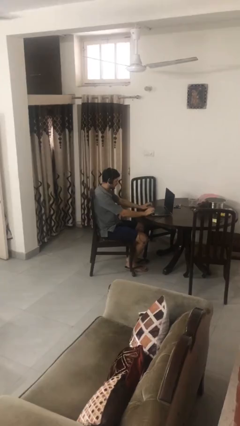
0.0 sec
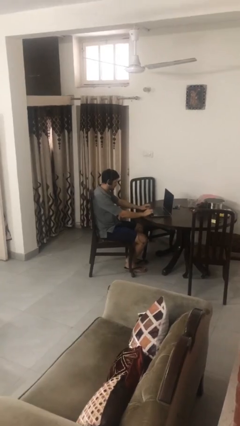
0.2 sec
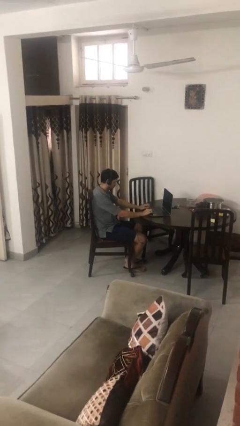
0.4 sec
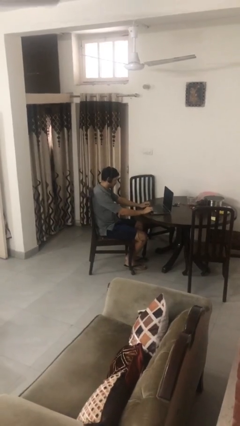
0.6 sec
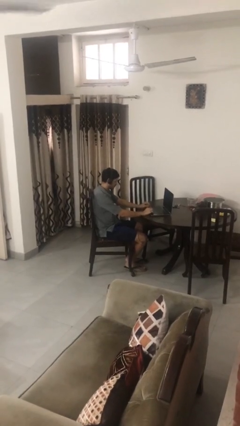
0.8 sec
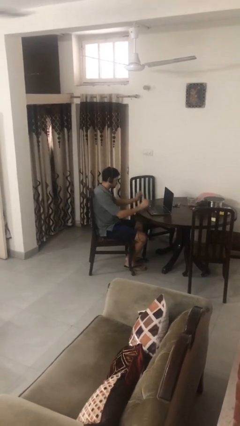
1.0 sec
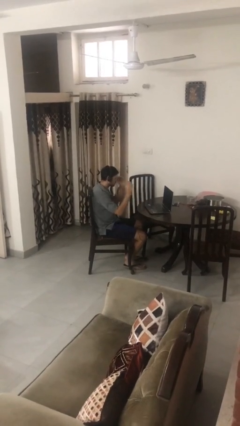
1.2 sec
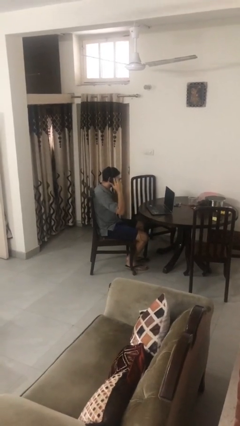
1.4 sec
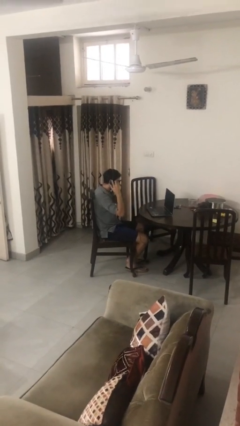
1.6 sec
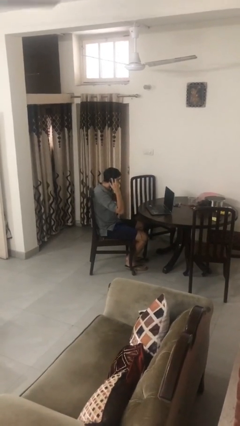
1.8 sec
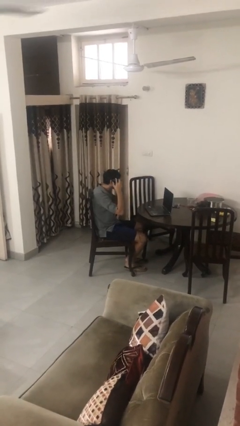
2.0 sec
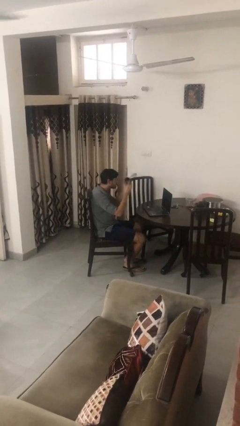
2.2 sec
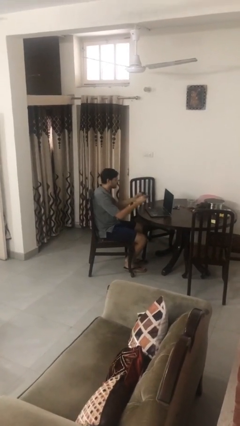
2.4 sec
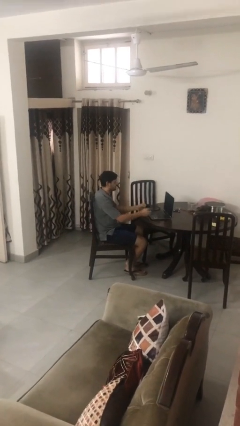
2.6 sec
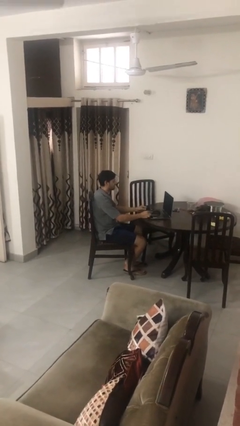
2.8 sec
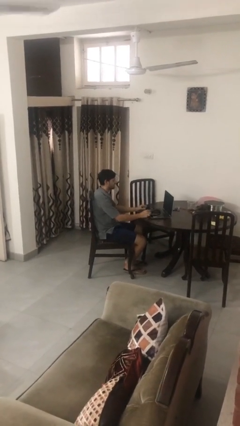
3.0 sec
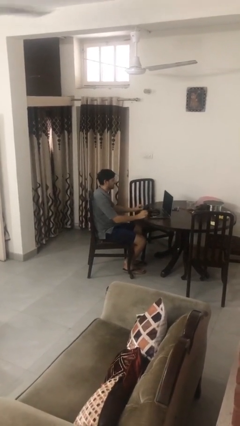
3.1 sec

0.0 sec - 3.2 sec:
person takes off headphones

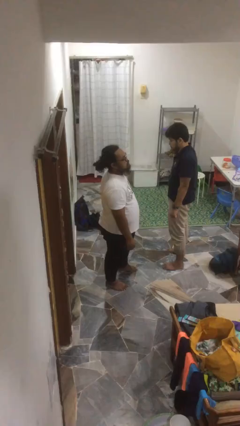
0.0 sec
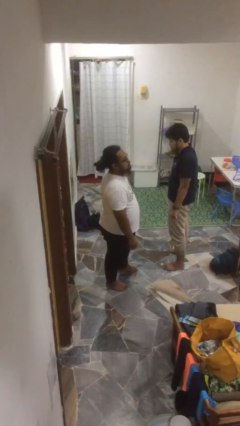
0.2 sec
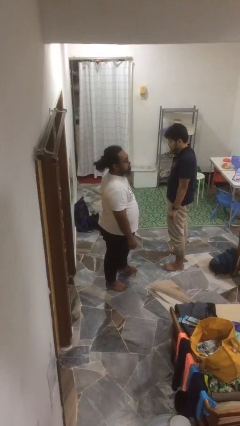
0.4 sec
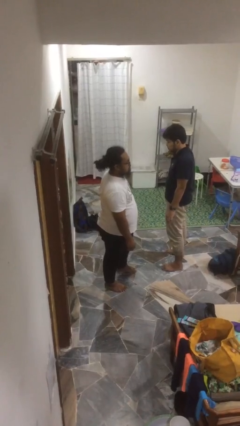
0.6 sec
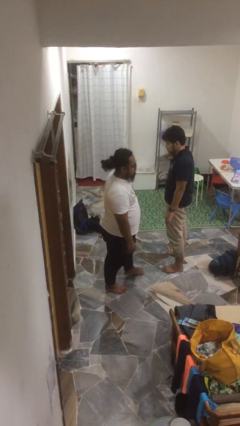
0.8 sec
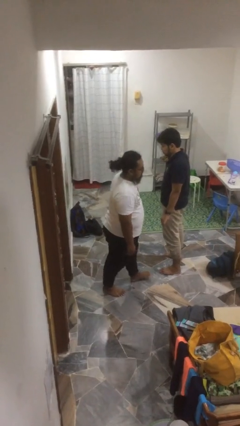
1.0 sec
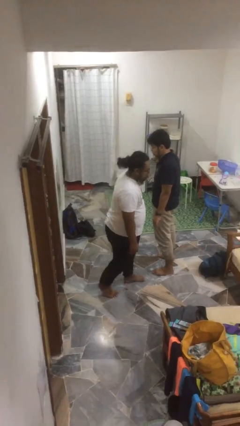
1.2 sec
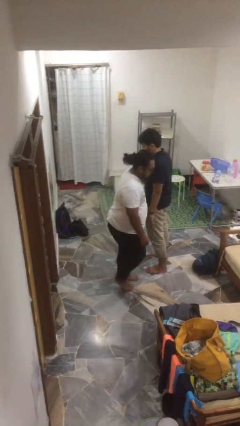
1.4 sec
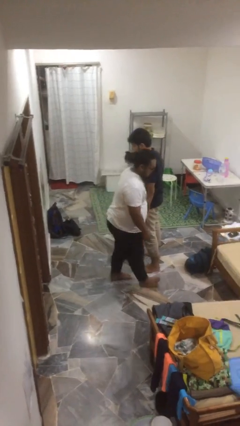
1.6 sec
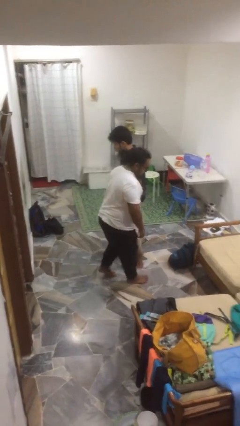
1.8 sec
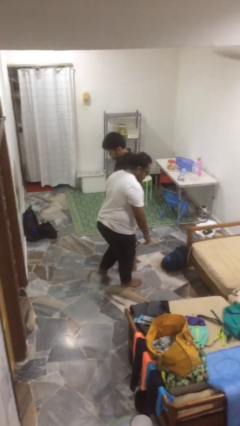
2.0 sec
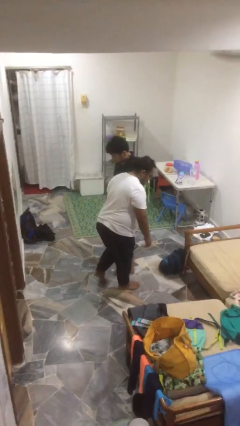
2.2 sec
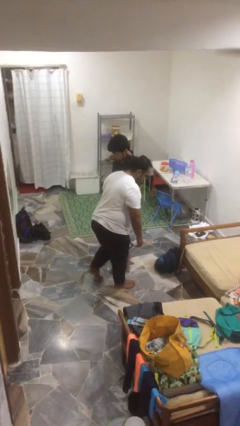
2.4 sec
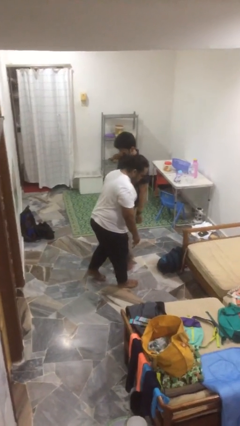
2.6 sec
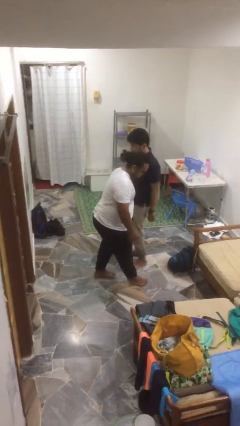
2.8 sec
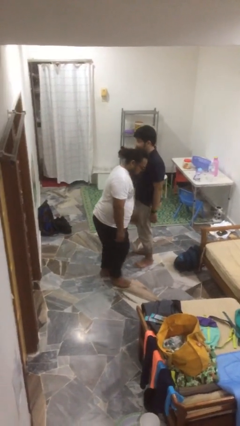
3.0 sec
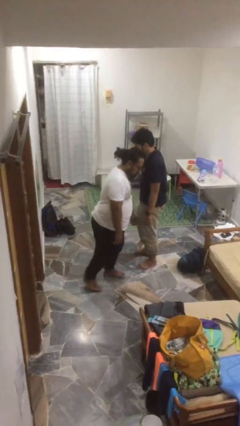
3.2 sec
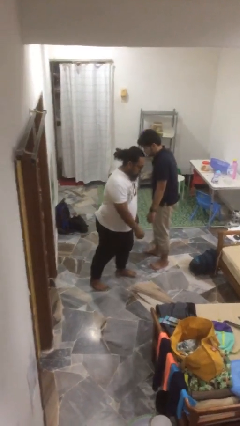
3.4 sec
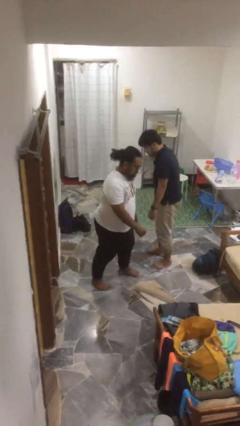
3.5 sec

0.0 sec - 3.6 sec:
person bumps into person

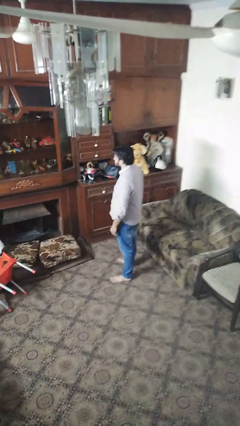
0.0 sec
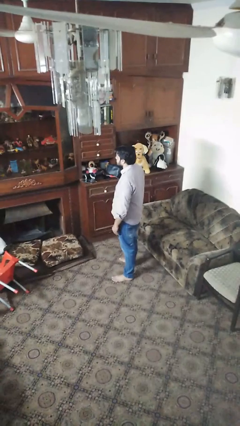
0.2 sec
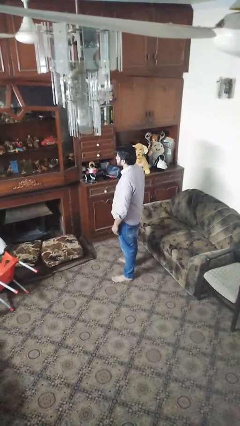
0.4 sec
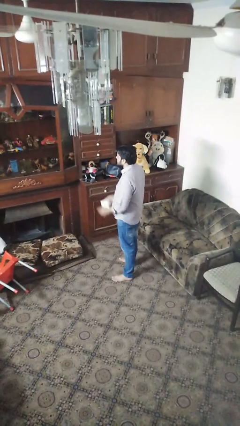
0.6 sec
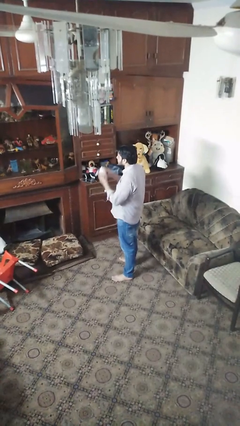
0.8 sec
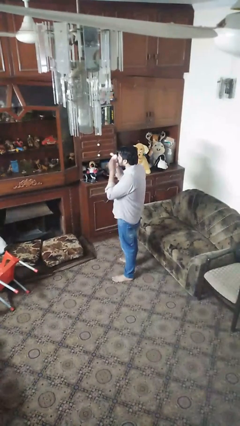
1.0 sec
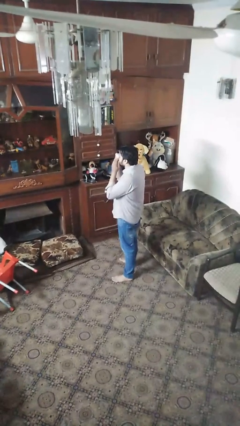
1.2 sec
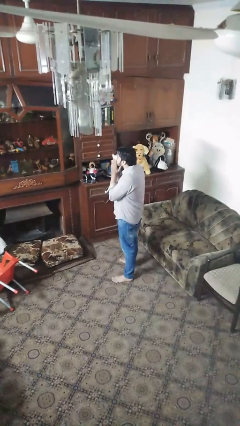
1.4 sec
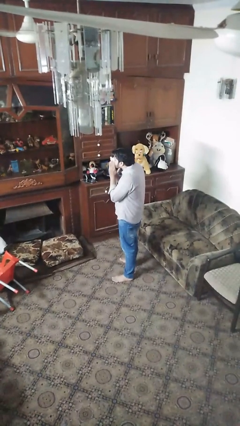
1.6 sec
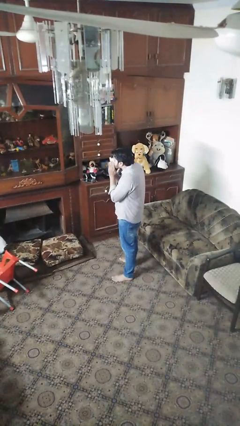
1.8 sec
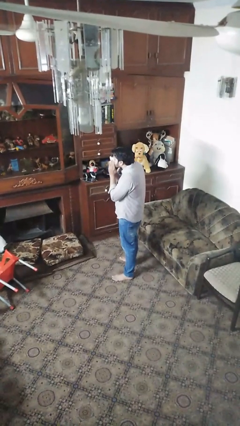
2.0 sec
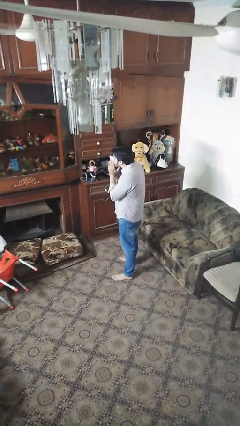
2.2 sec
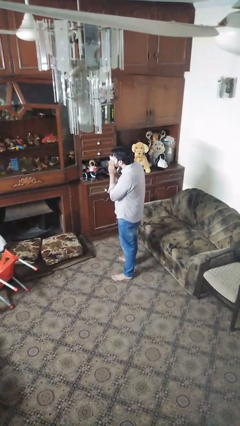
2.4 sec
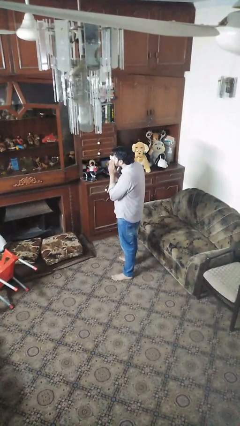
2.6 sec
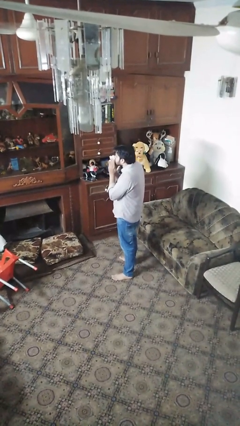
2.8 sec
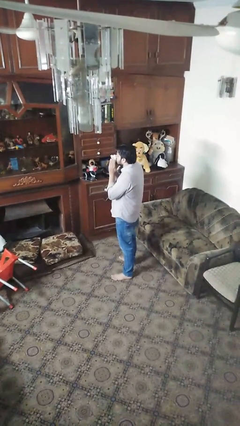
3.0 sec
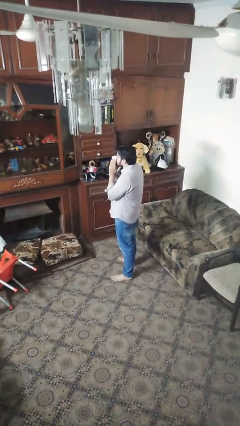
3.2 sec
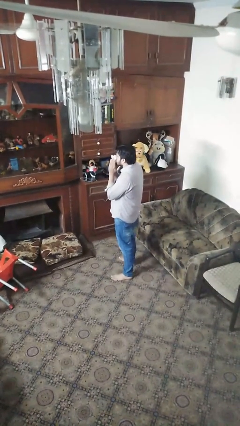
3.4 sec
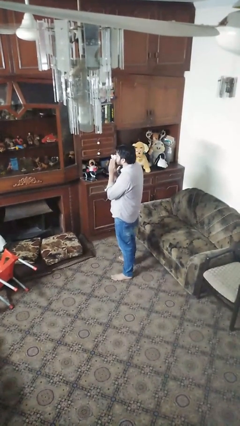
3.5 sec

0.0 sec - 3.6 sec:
person blows nose

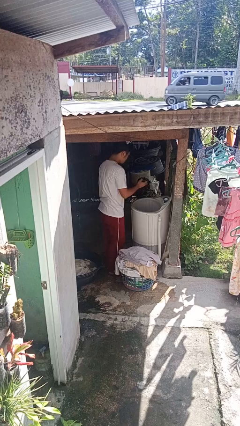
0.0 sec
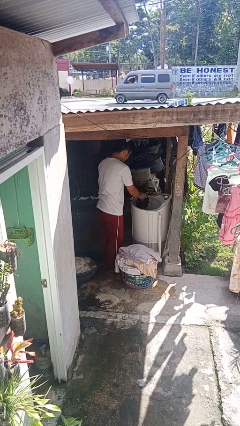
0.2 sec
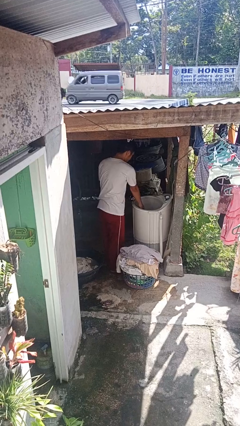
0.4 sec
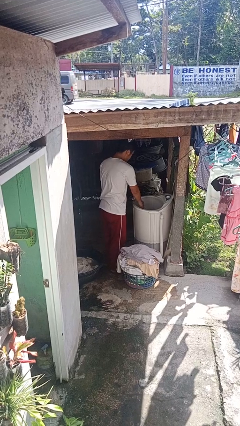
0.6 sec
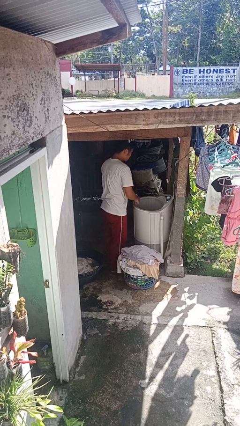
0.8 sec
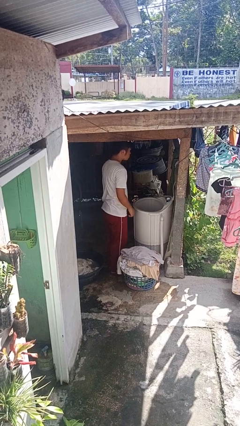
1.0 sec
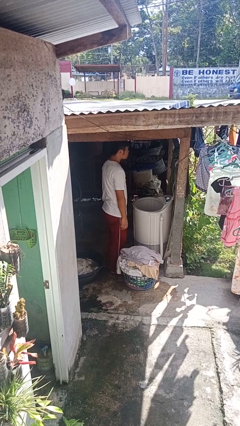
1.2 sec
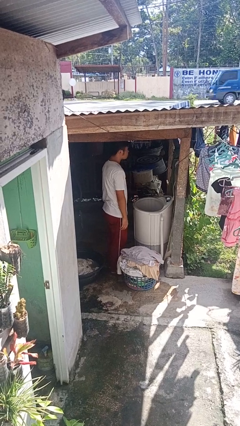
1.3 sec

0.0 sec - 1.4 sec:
person loads clotheswasher

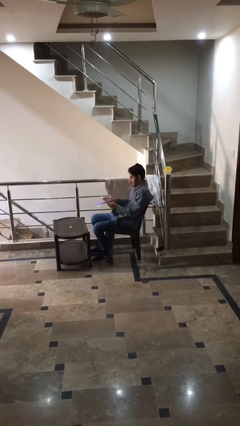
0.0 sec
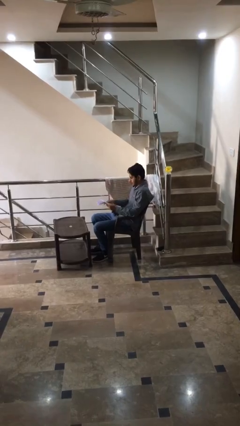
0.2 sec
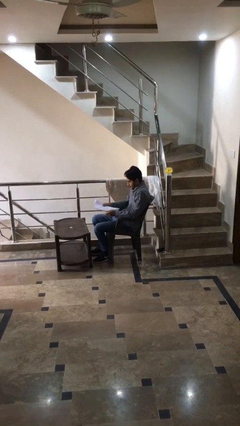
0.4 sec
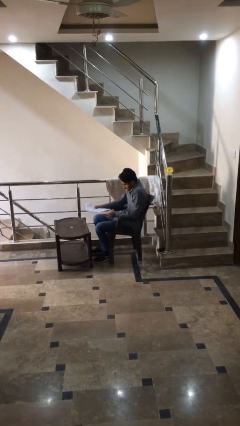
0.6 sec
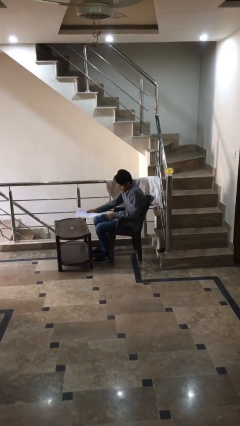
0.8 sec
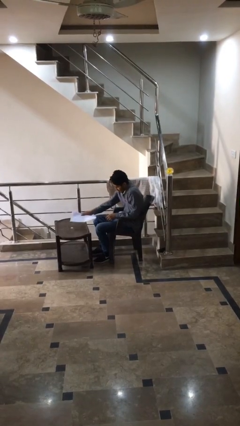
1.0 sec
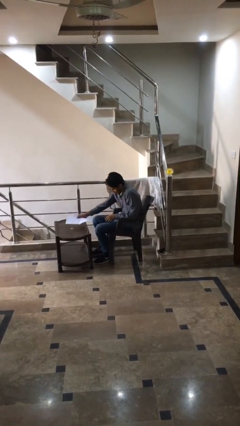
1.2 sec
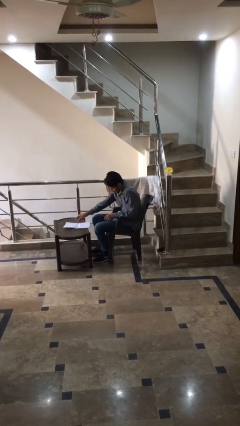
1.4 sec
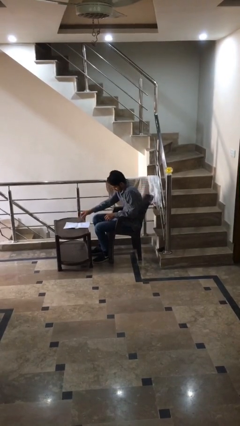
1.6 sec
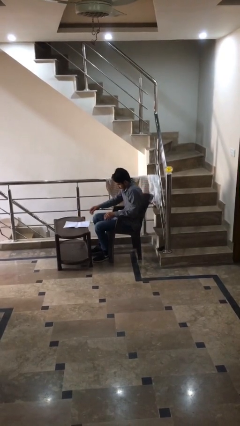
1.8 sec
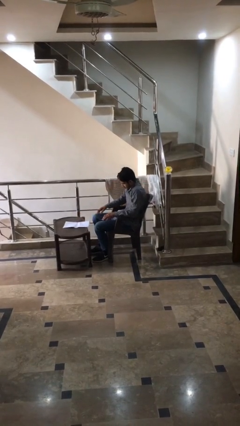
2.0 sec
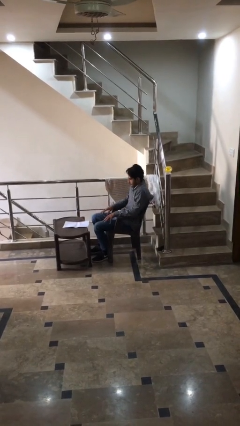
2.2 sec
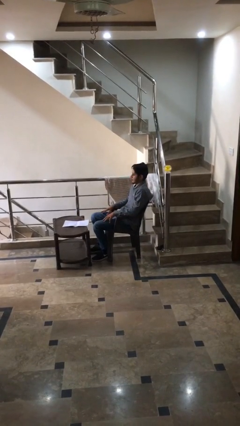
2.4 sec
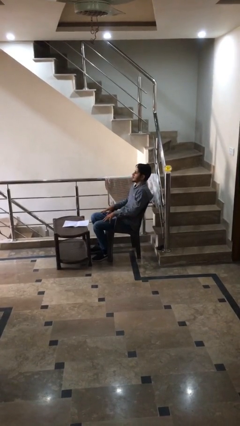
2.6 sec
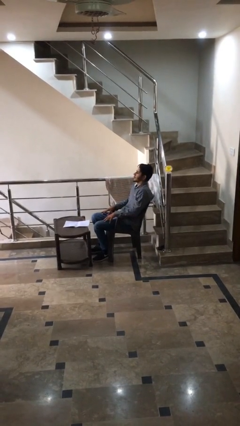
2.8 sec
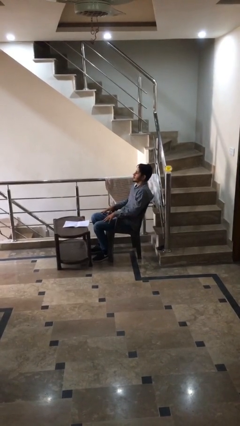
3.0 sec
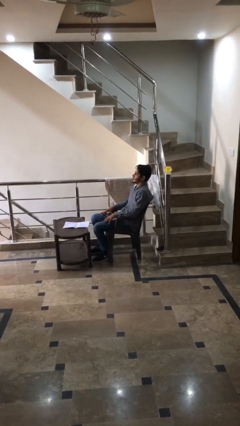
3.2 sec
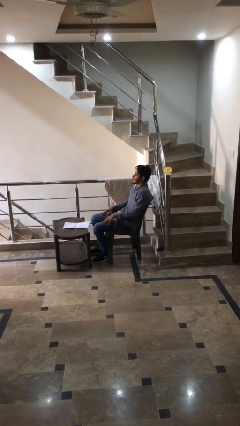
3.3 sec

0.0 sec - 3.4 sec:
person puts down object on table

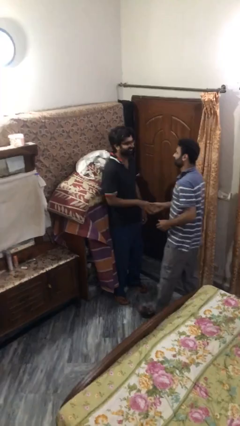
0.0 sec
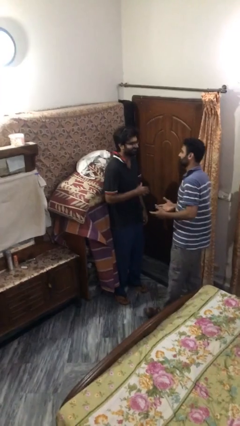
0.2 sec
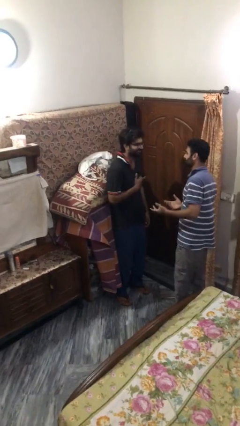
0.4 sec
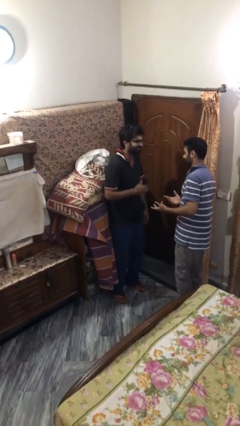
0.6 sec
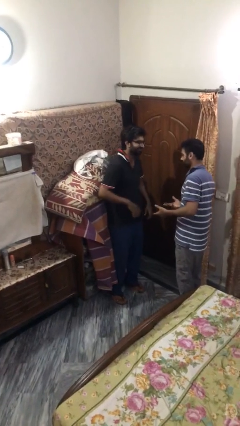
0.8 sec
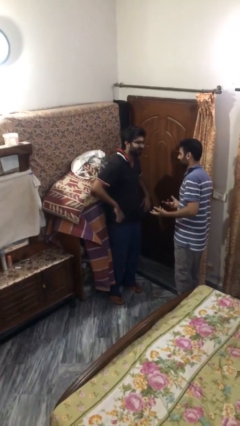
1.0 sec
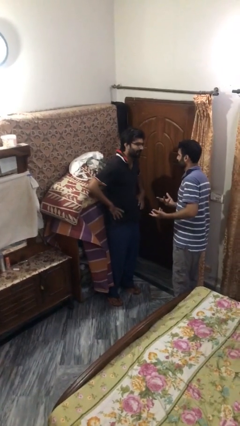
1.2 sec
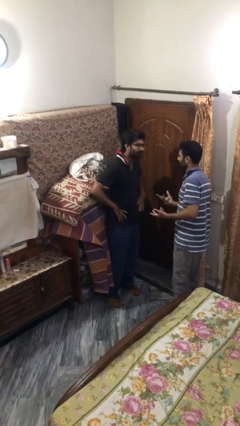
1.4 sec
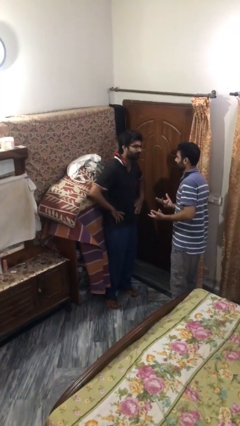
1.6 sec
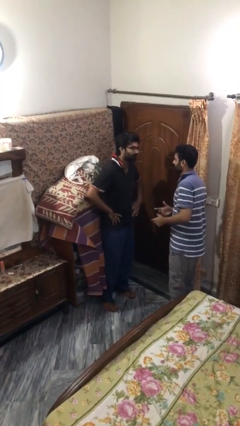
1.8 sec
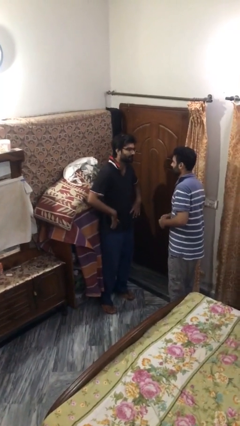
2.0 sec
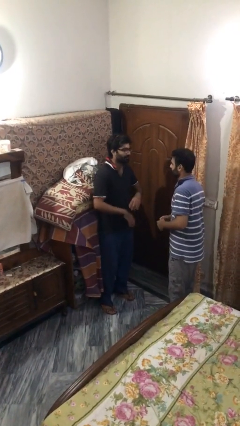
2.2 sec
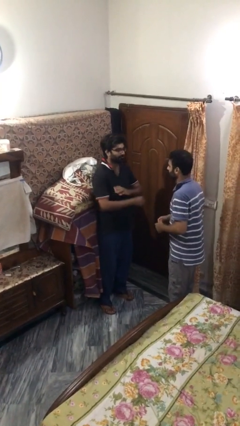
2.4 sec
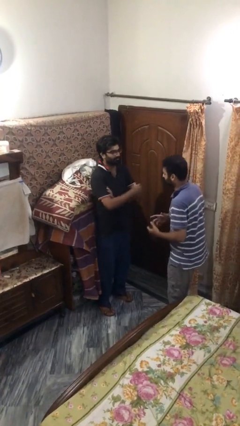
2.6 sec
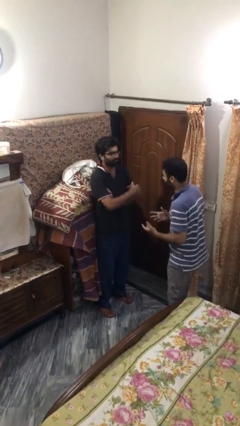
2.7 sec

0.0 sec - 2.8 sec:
person talks to person
